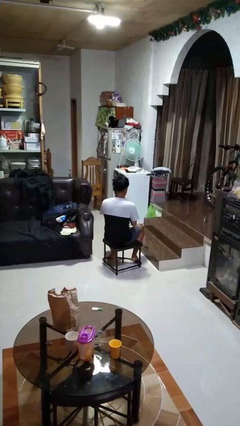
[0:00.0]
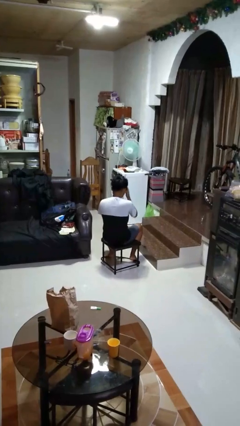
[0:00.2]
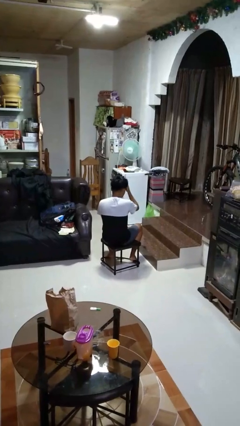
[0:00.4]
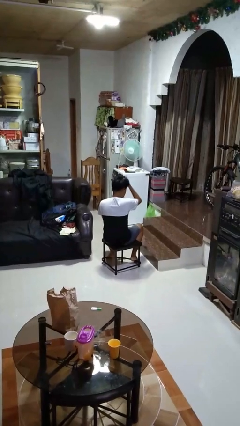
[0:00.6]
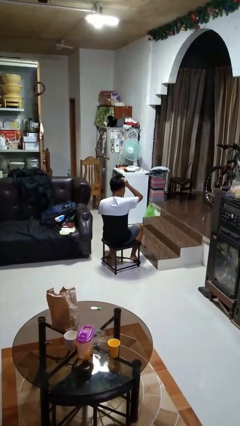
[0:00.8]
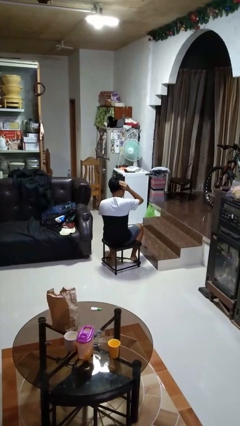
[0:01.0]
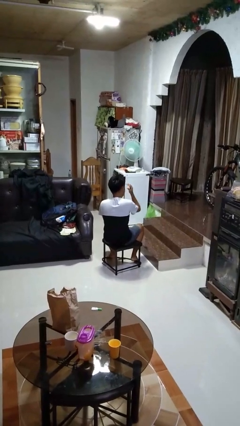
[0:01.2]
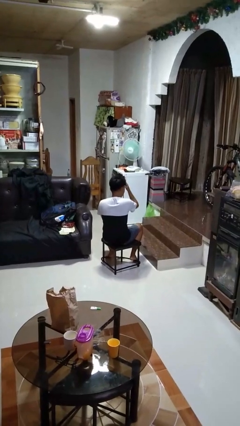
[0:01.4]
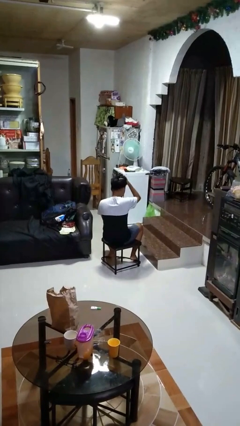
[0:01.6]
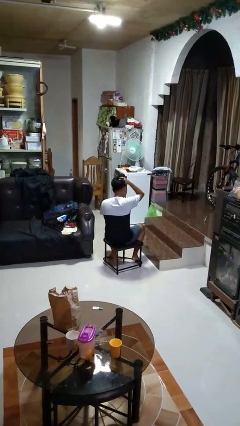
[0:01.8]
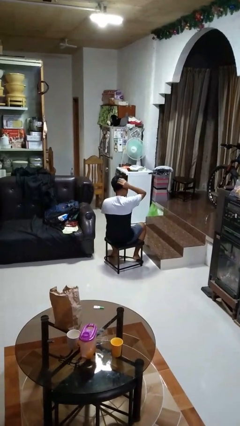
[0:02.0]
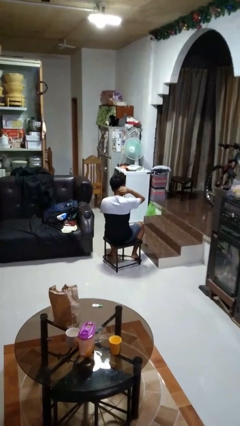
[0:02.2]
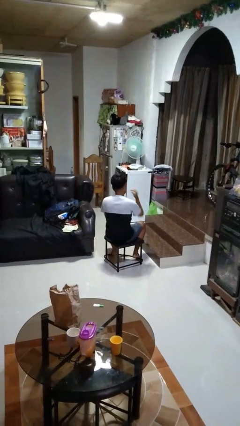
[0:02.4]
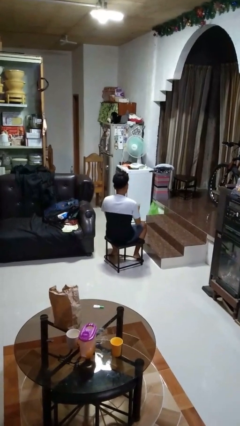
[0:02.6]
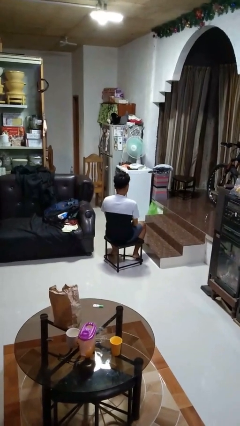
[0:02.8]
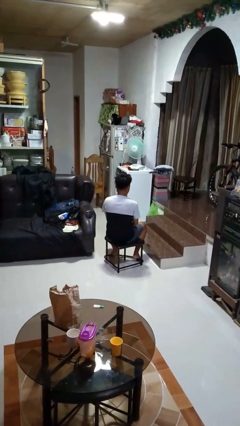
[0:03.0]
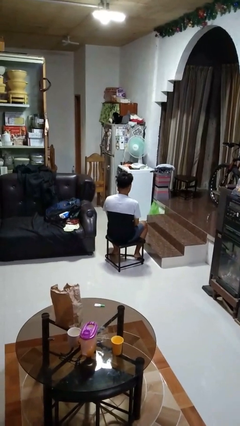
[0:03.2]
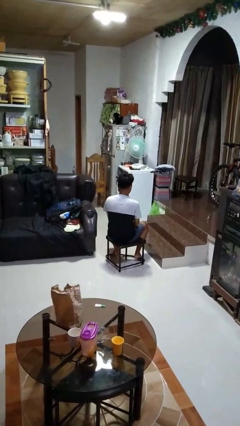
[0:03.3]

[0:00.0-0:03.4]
person strokes hair

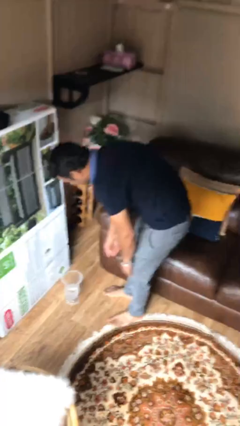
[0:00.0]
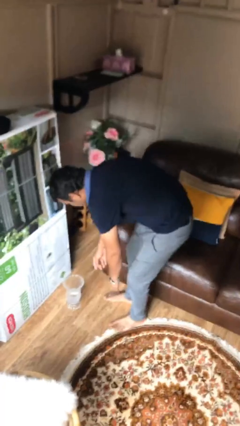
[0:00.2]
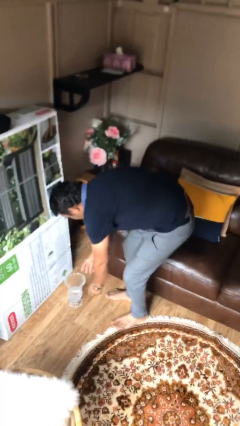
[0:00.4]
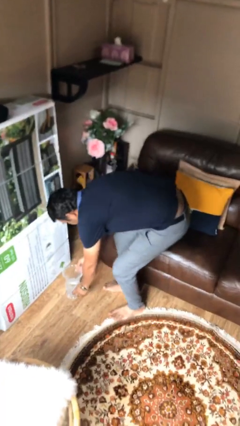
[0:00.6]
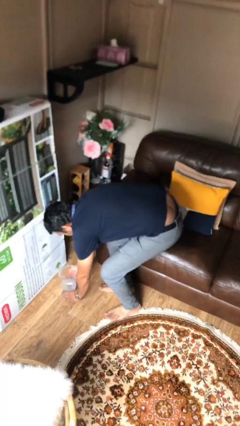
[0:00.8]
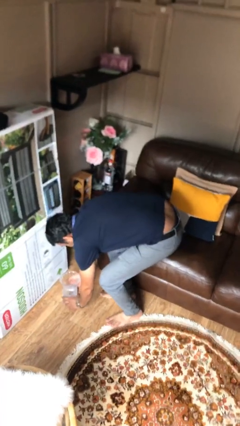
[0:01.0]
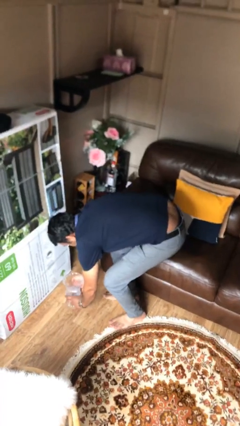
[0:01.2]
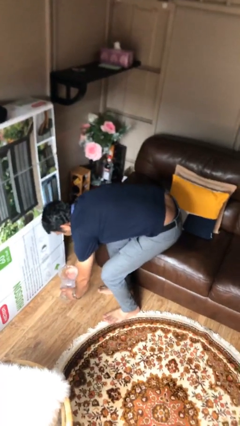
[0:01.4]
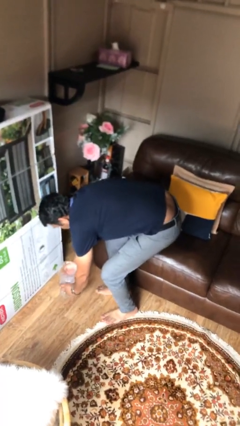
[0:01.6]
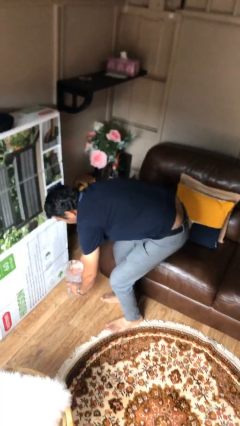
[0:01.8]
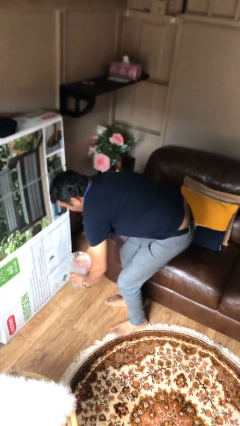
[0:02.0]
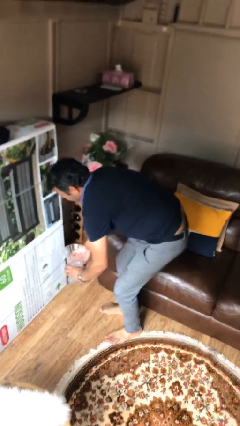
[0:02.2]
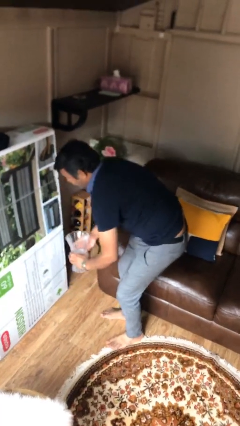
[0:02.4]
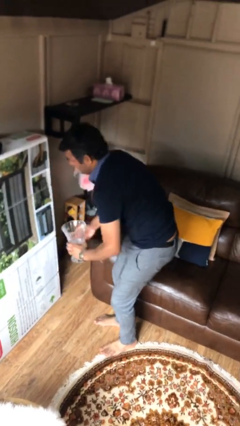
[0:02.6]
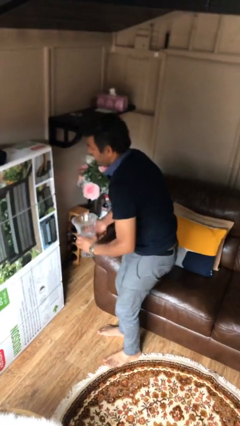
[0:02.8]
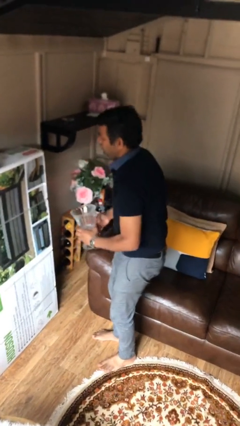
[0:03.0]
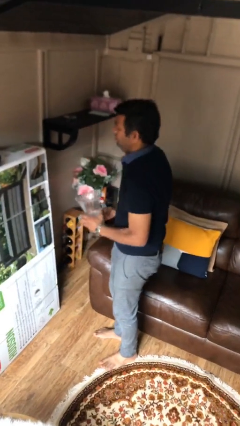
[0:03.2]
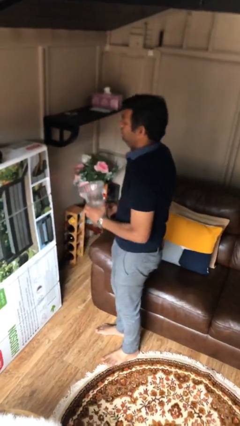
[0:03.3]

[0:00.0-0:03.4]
person picks up object from floor

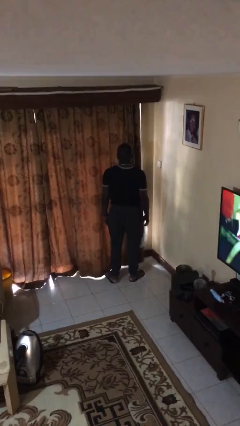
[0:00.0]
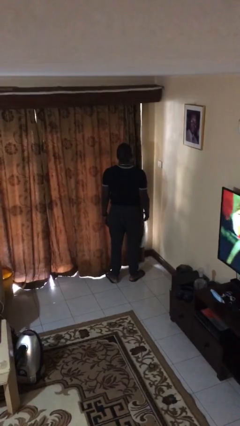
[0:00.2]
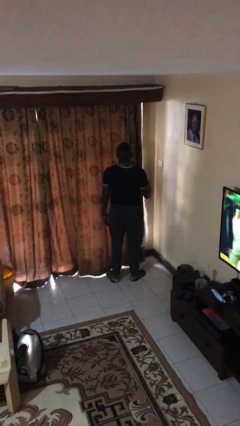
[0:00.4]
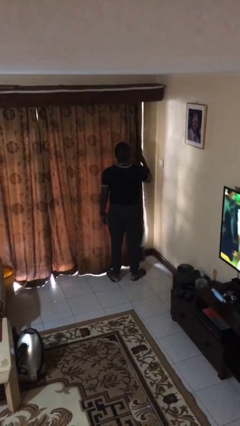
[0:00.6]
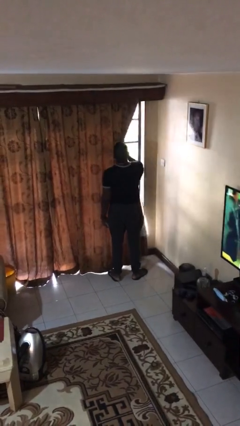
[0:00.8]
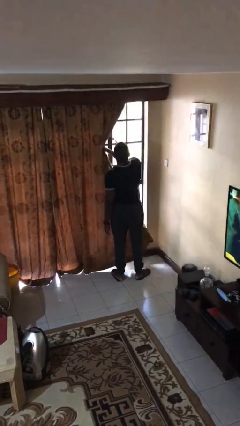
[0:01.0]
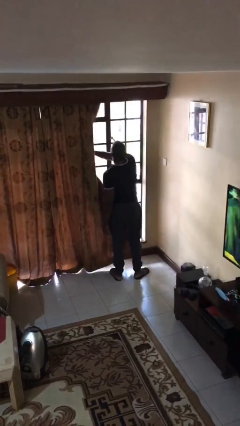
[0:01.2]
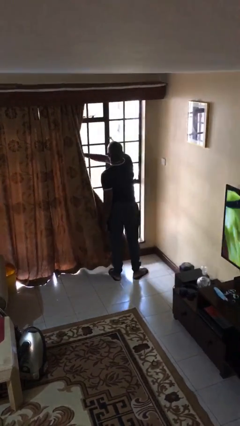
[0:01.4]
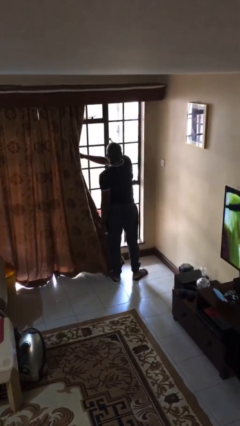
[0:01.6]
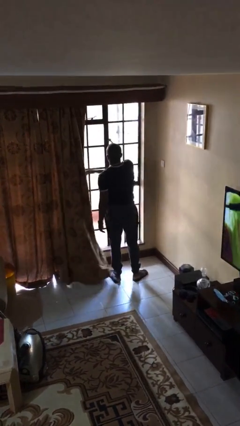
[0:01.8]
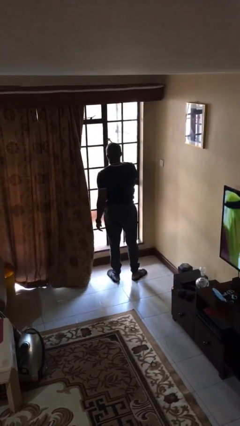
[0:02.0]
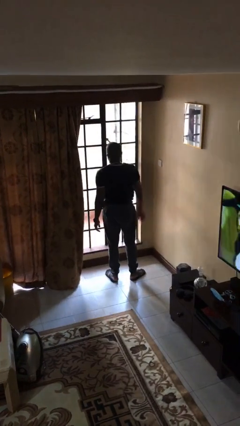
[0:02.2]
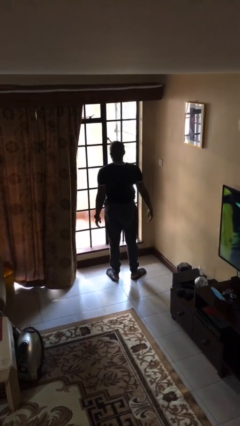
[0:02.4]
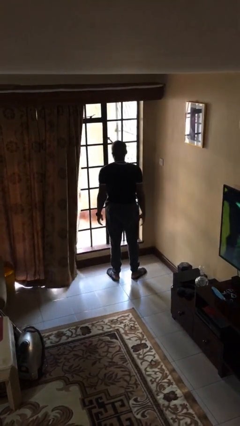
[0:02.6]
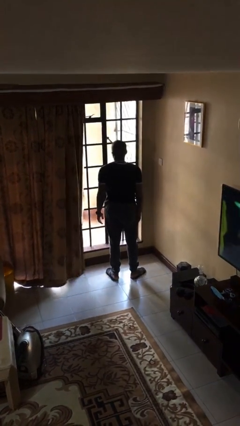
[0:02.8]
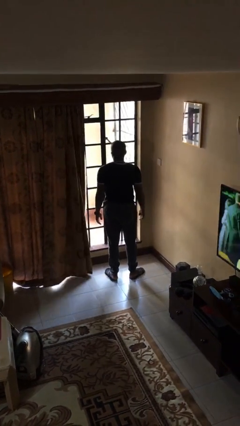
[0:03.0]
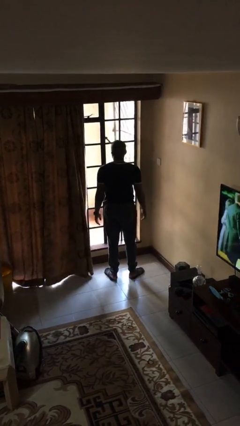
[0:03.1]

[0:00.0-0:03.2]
person opens curtains

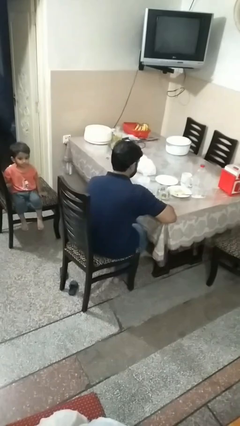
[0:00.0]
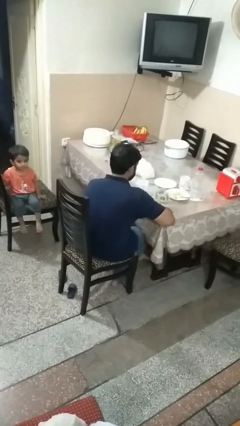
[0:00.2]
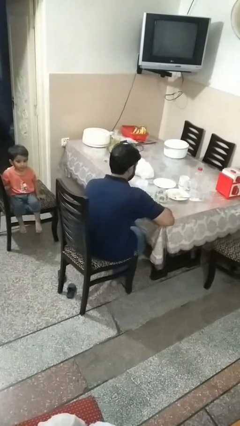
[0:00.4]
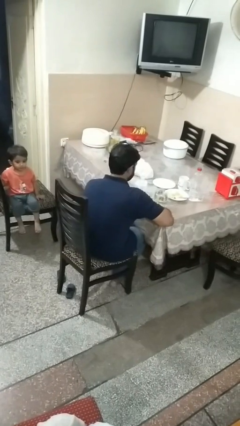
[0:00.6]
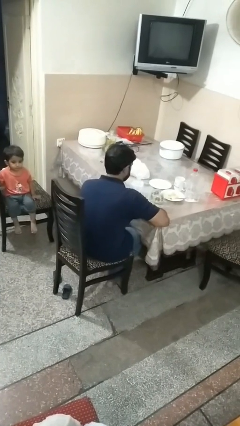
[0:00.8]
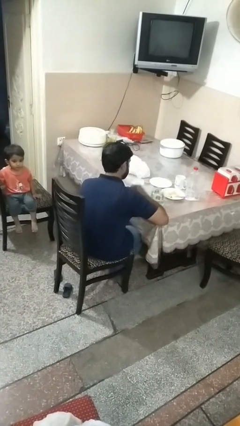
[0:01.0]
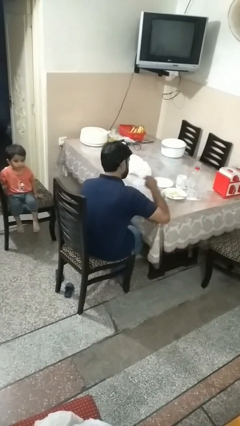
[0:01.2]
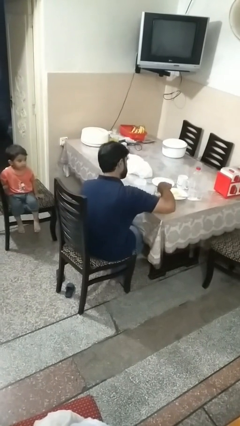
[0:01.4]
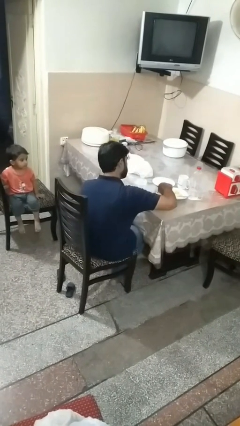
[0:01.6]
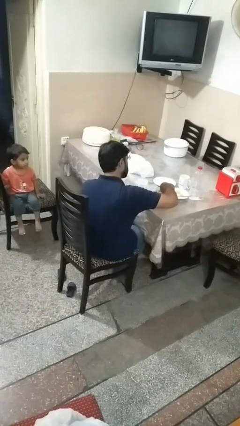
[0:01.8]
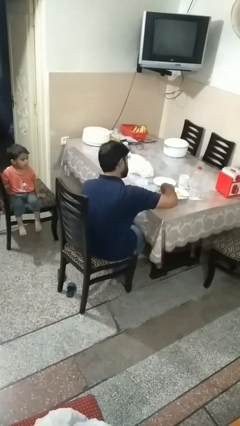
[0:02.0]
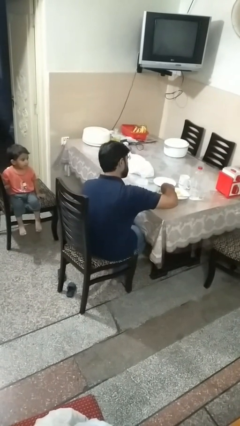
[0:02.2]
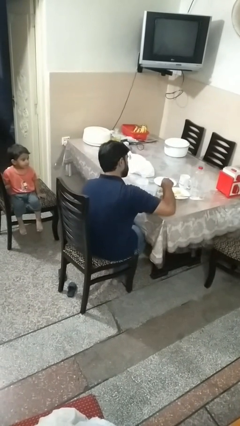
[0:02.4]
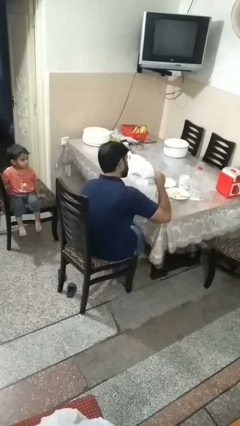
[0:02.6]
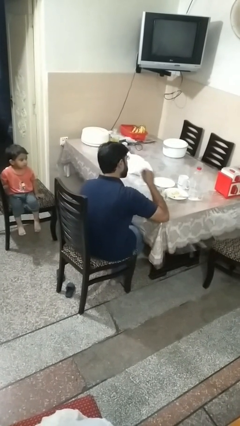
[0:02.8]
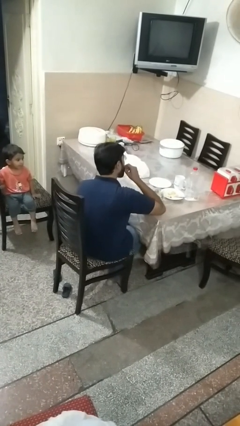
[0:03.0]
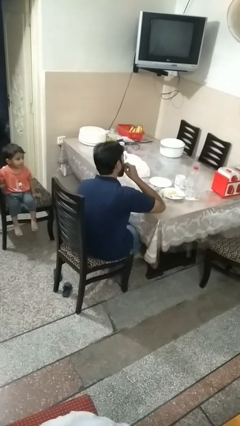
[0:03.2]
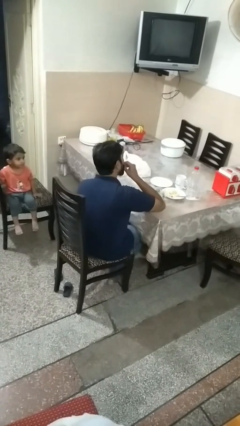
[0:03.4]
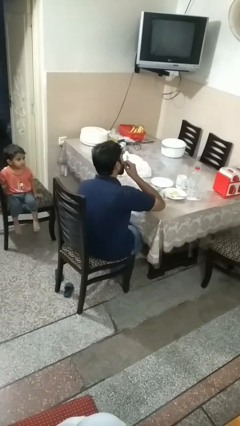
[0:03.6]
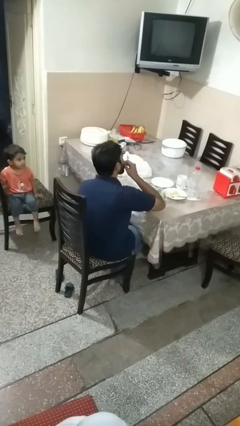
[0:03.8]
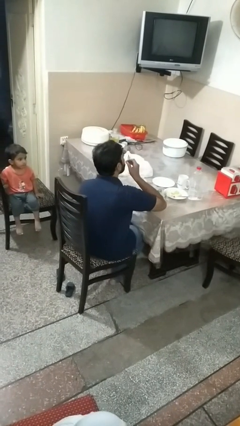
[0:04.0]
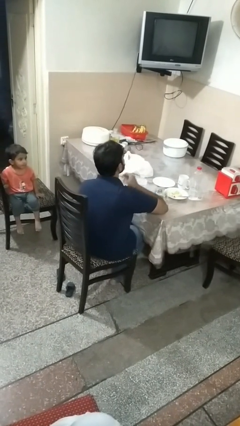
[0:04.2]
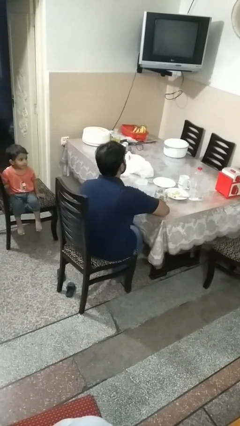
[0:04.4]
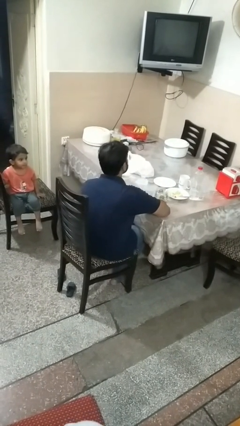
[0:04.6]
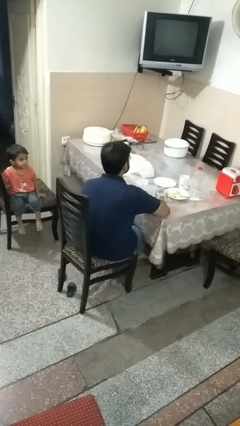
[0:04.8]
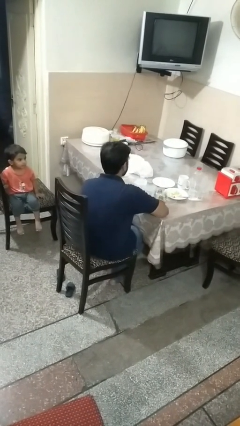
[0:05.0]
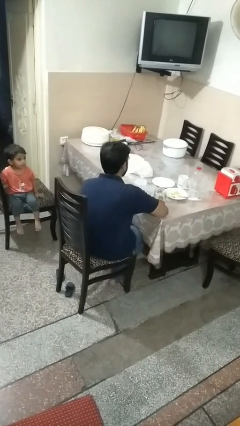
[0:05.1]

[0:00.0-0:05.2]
person eats with hands

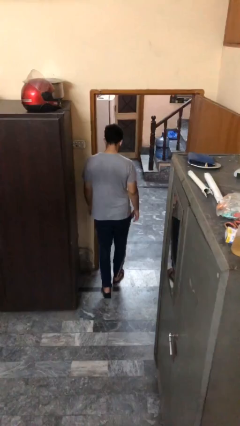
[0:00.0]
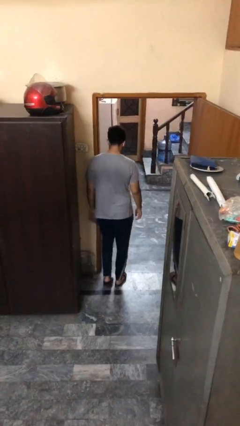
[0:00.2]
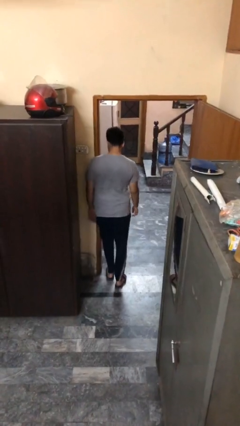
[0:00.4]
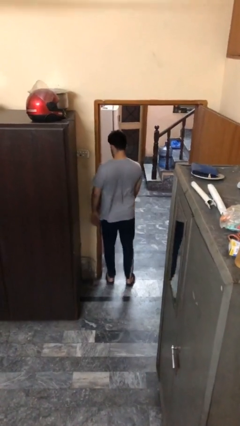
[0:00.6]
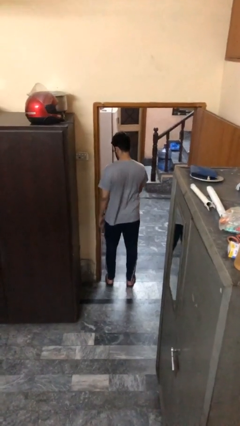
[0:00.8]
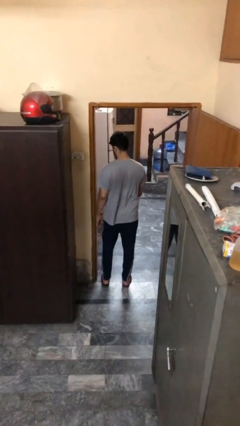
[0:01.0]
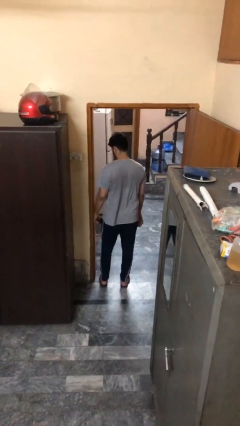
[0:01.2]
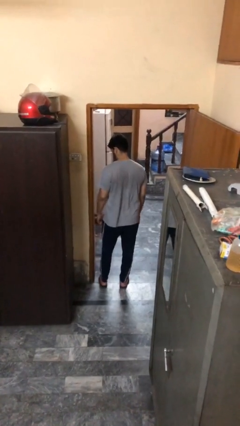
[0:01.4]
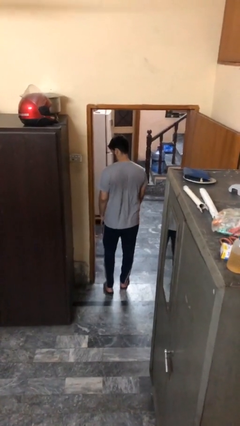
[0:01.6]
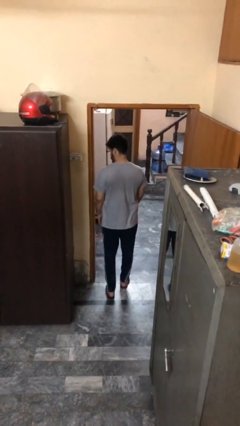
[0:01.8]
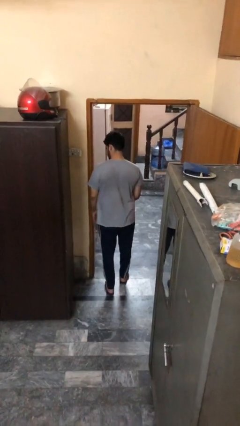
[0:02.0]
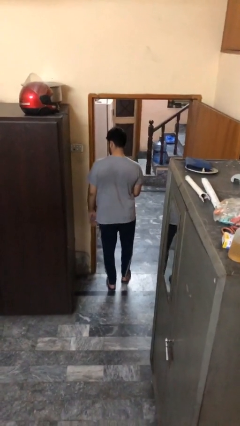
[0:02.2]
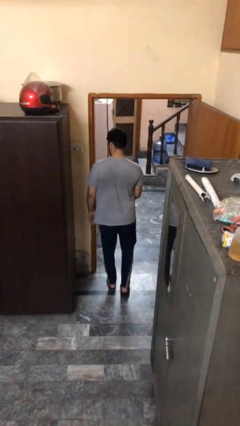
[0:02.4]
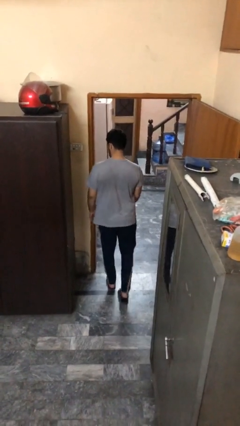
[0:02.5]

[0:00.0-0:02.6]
person bumps into wall
